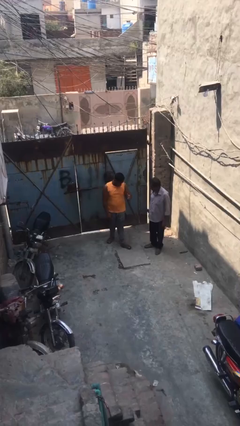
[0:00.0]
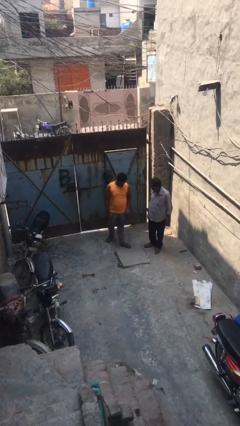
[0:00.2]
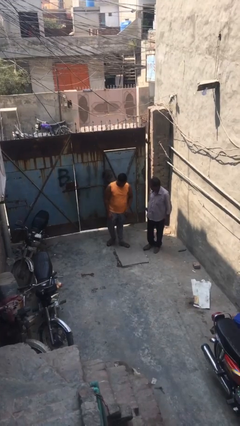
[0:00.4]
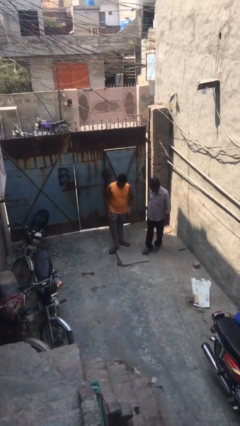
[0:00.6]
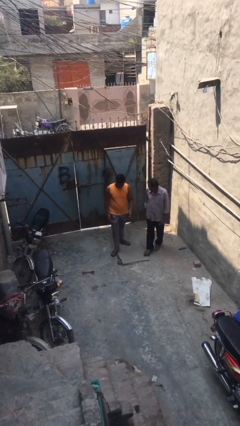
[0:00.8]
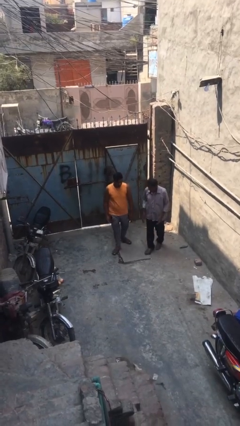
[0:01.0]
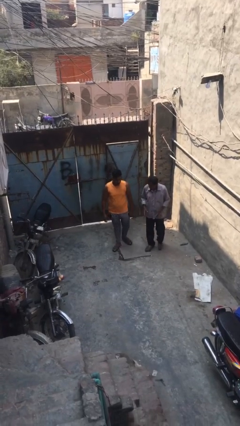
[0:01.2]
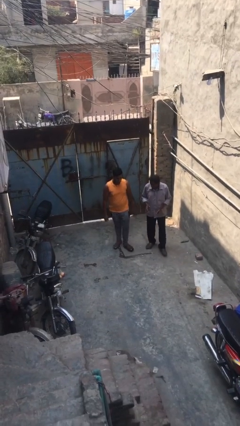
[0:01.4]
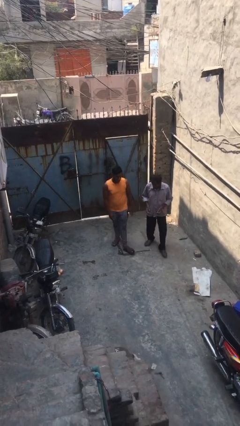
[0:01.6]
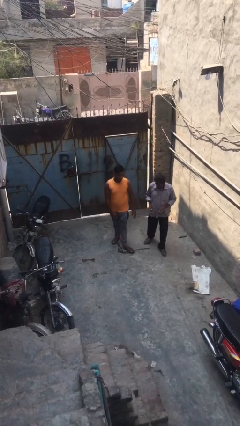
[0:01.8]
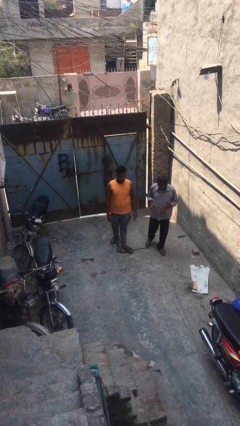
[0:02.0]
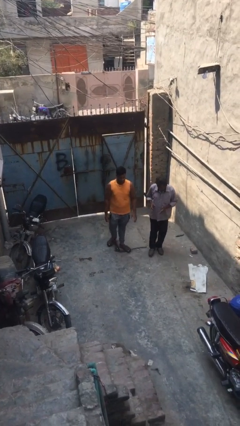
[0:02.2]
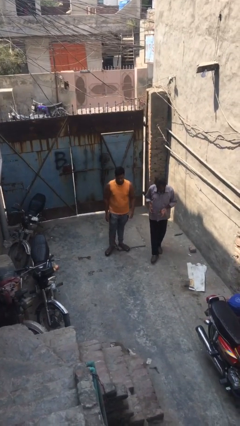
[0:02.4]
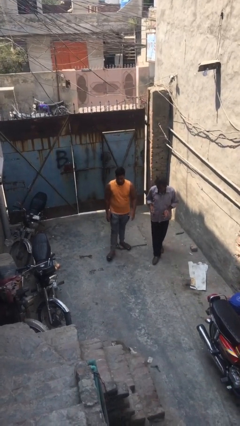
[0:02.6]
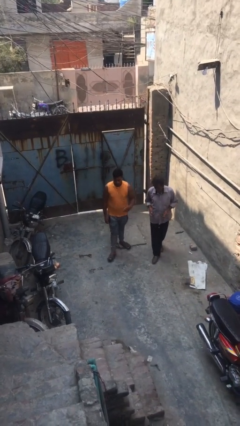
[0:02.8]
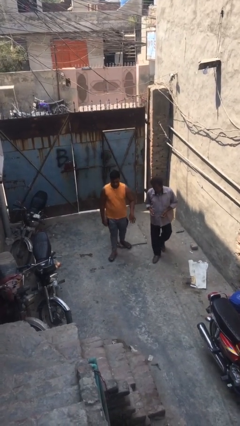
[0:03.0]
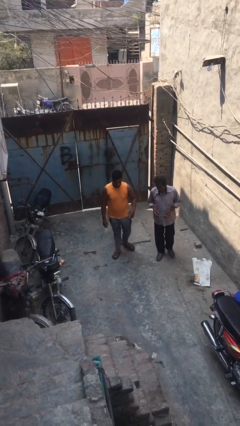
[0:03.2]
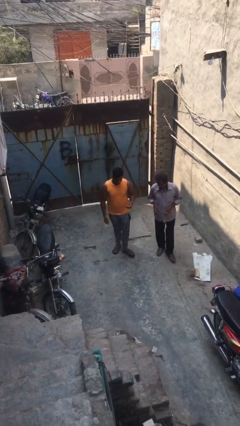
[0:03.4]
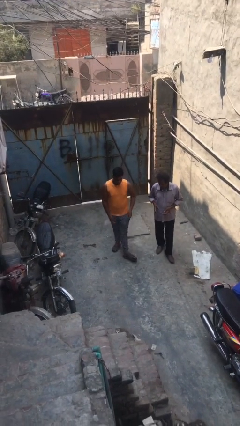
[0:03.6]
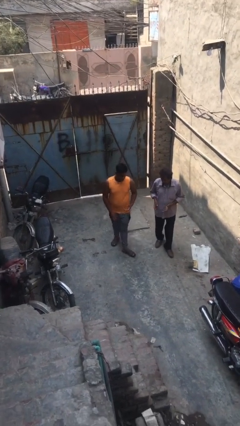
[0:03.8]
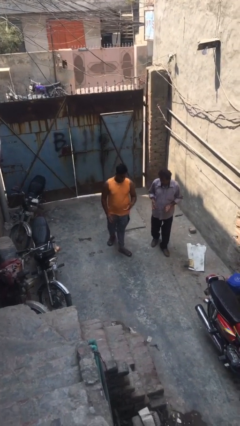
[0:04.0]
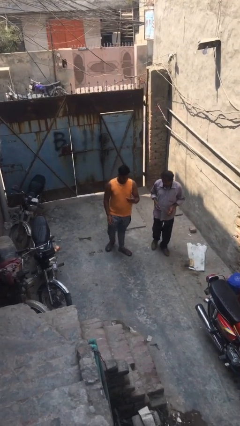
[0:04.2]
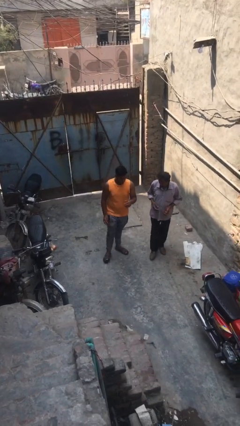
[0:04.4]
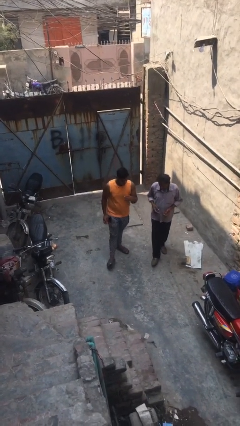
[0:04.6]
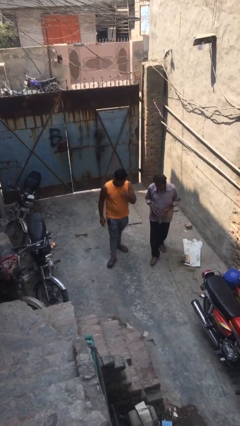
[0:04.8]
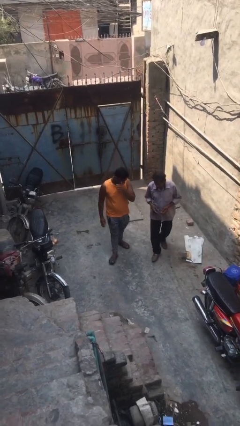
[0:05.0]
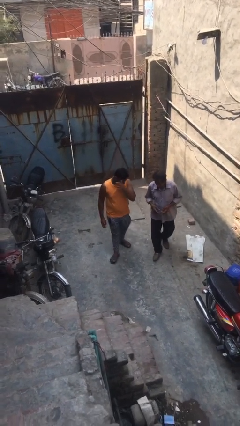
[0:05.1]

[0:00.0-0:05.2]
person talks to person

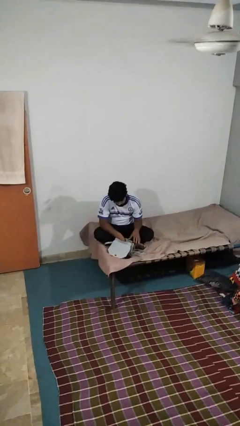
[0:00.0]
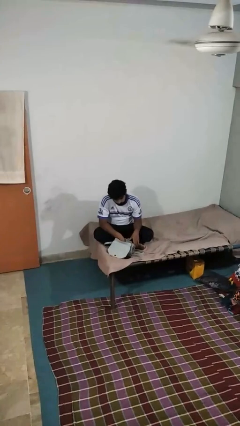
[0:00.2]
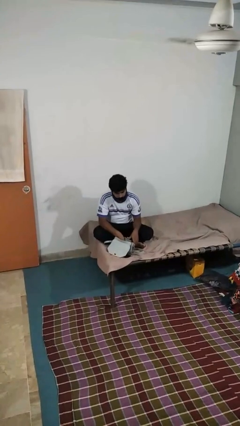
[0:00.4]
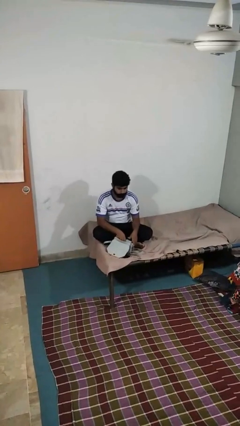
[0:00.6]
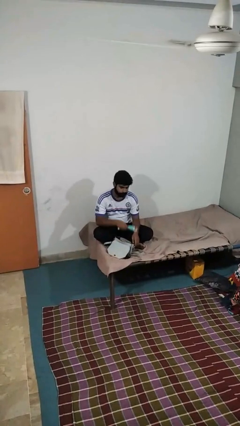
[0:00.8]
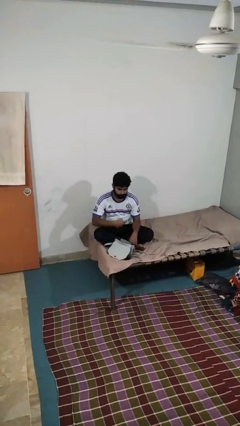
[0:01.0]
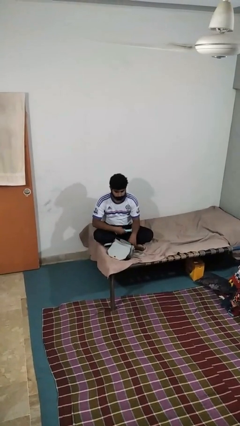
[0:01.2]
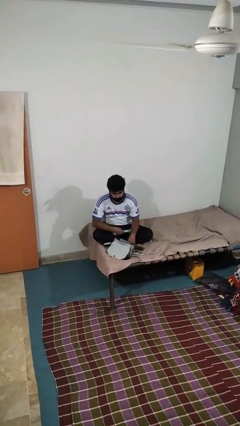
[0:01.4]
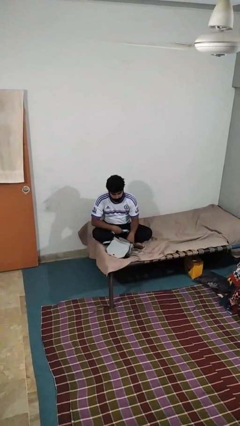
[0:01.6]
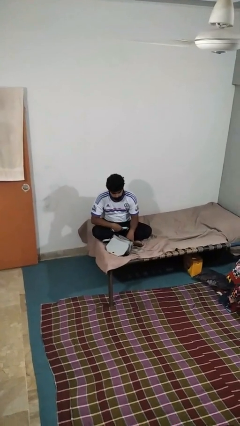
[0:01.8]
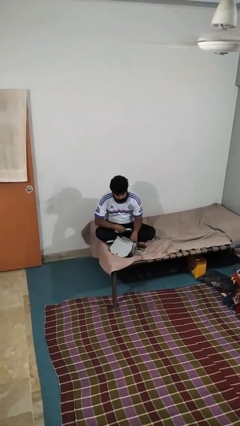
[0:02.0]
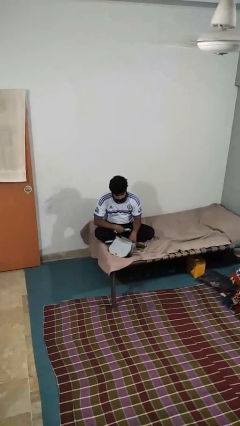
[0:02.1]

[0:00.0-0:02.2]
person takes object from purse

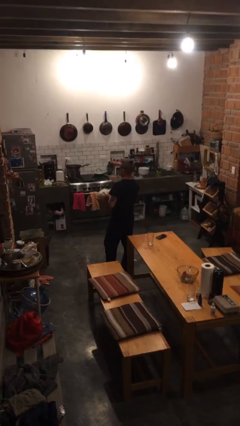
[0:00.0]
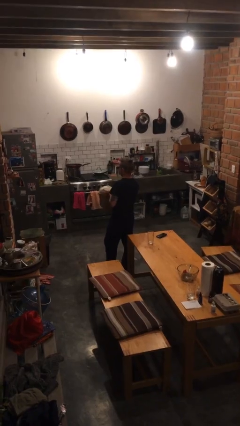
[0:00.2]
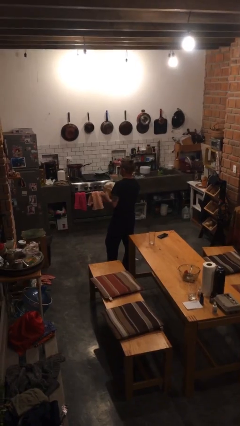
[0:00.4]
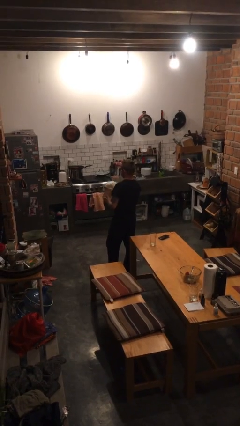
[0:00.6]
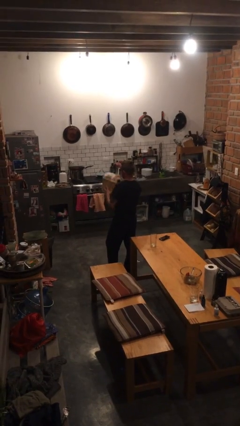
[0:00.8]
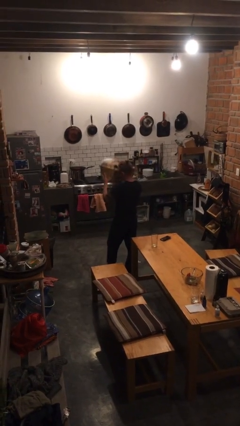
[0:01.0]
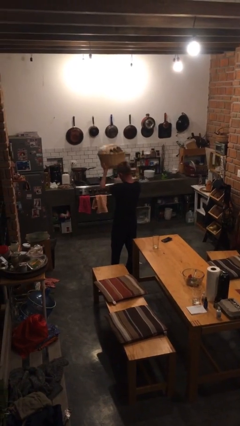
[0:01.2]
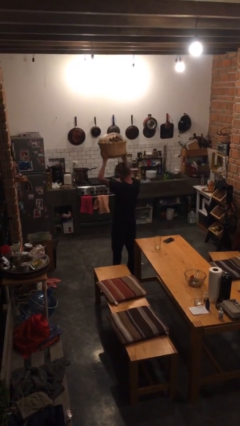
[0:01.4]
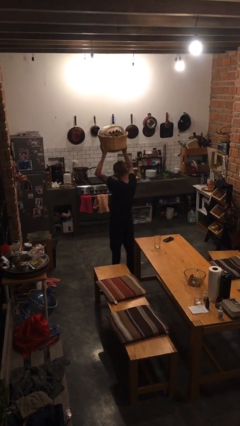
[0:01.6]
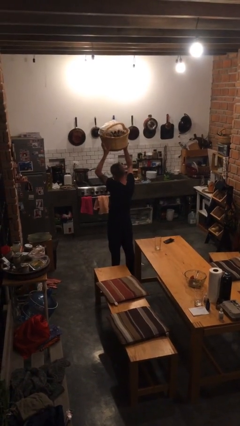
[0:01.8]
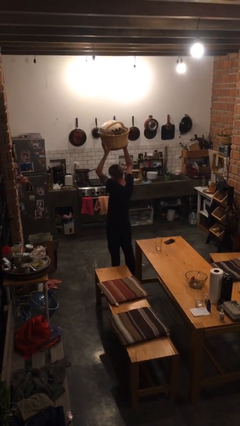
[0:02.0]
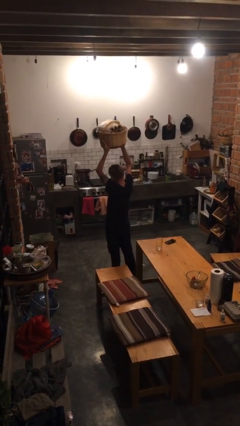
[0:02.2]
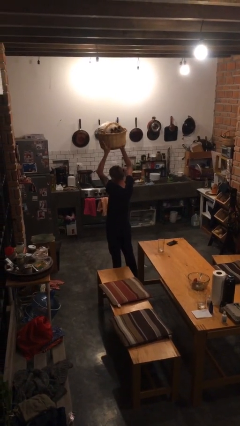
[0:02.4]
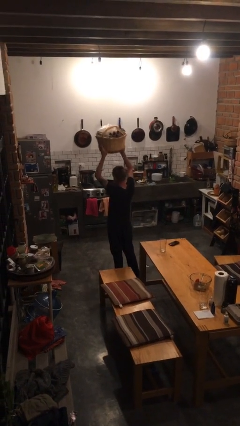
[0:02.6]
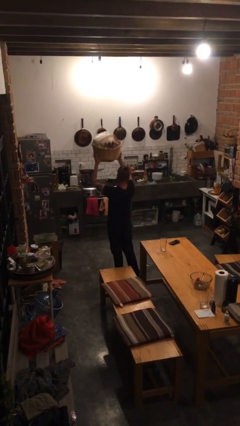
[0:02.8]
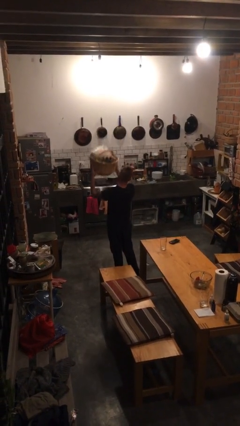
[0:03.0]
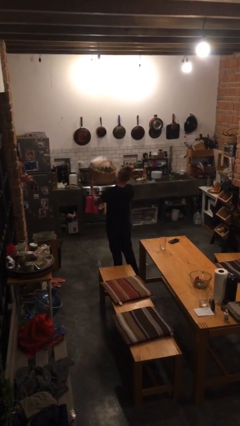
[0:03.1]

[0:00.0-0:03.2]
person holds object above head

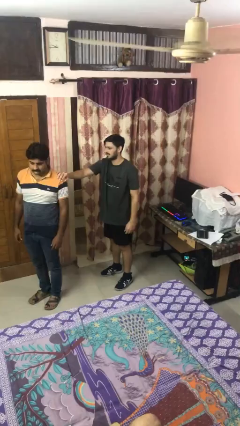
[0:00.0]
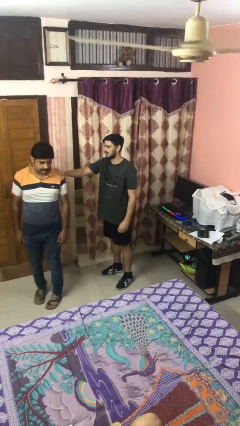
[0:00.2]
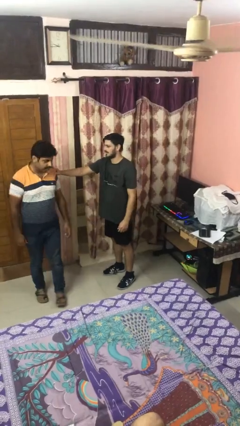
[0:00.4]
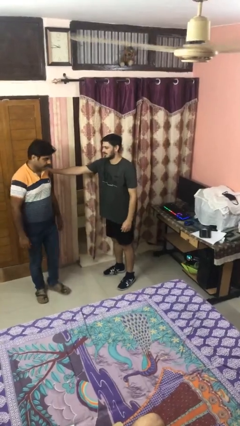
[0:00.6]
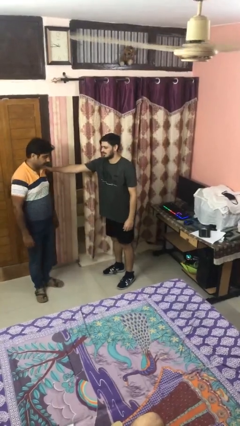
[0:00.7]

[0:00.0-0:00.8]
person spins person around

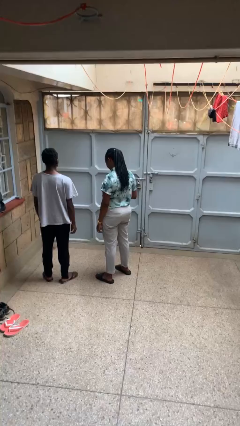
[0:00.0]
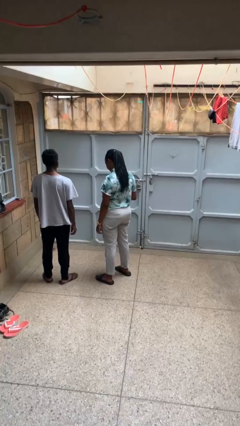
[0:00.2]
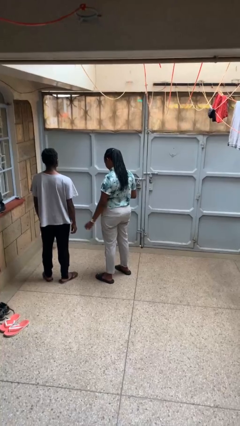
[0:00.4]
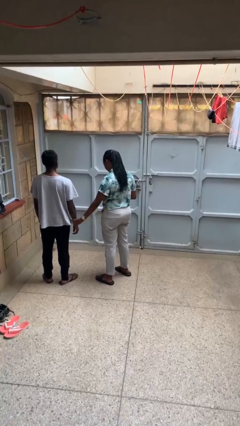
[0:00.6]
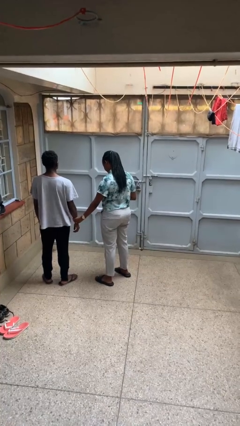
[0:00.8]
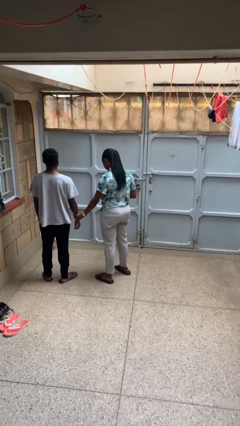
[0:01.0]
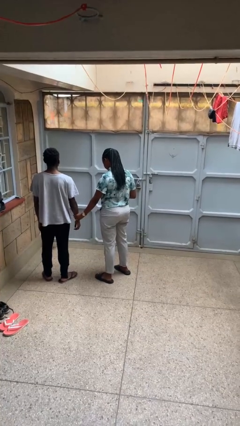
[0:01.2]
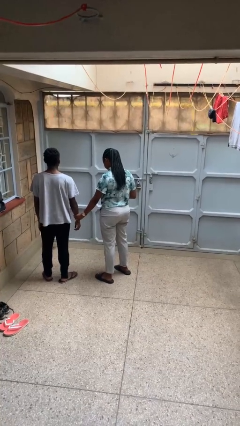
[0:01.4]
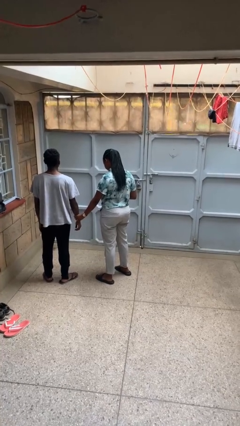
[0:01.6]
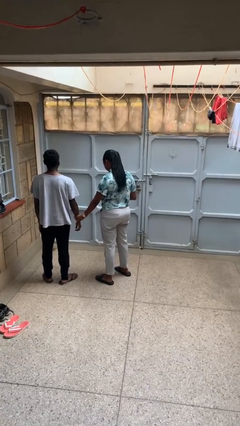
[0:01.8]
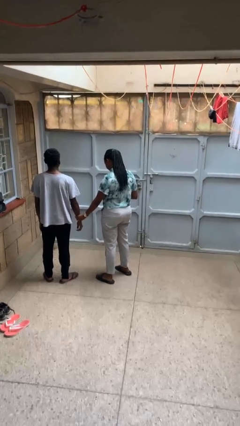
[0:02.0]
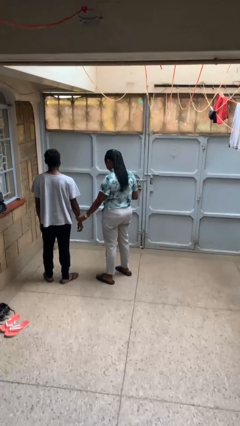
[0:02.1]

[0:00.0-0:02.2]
person grabs person by forearm

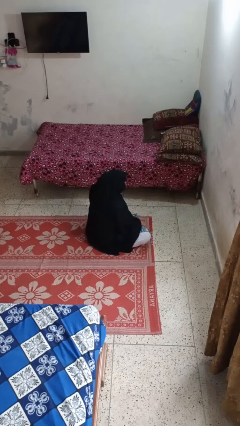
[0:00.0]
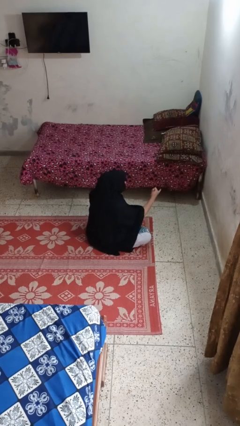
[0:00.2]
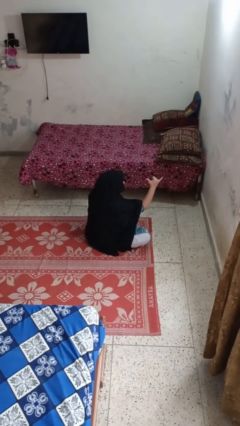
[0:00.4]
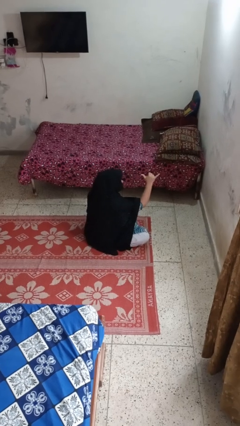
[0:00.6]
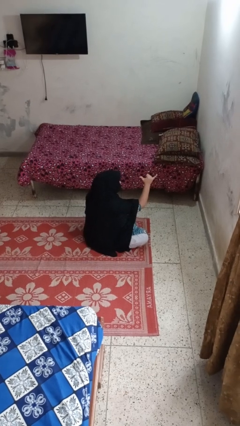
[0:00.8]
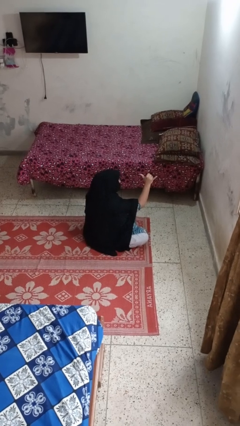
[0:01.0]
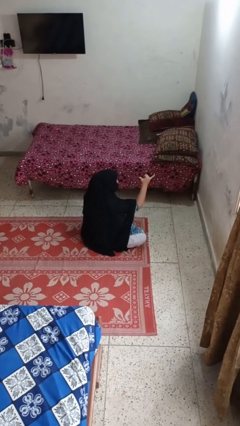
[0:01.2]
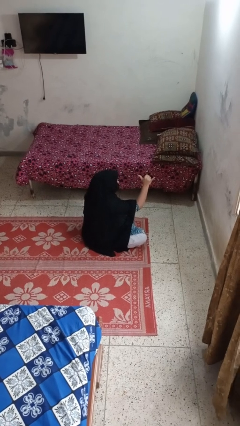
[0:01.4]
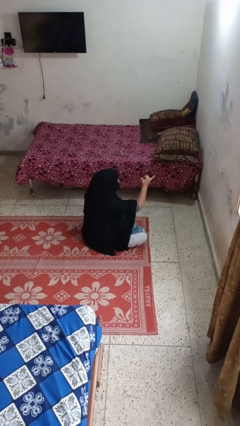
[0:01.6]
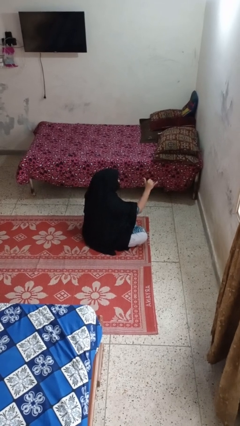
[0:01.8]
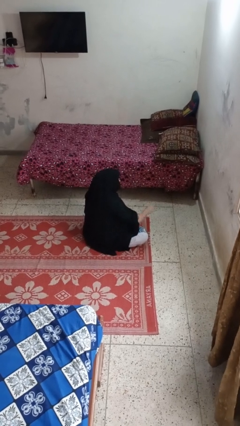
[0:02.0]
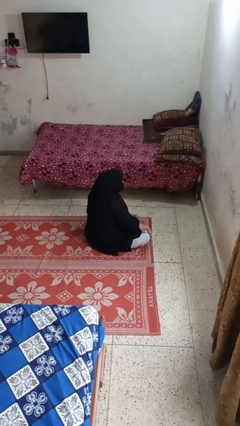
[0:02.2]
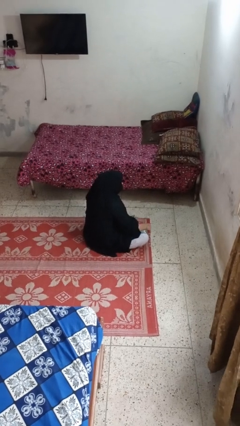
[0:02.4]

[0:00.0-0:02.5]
person gestures hang loose

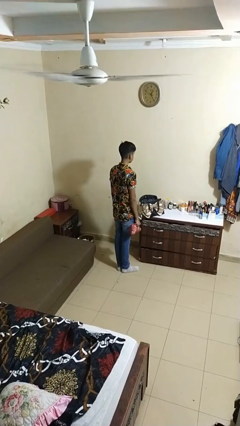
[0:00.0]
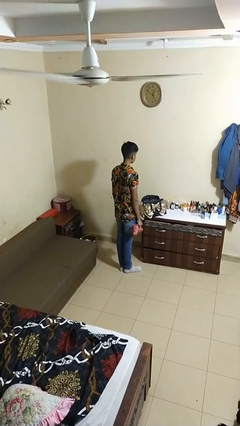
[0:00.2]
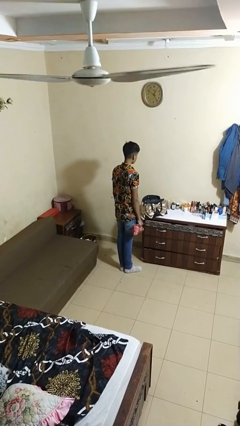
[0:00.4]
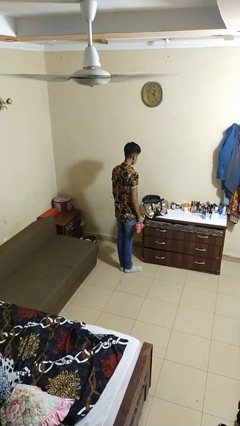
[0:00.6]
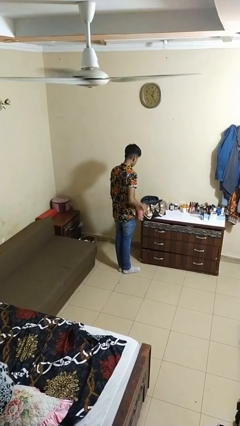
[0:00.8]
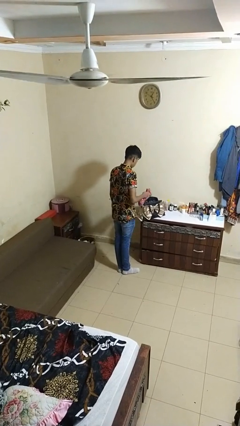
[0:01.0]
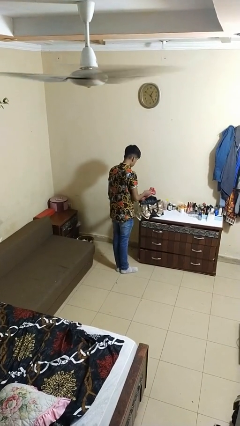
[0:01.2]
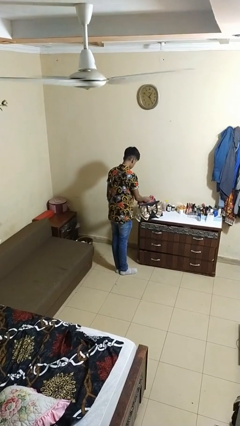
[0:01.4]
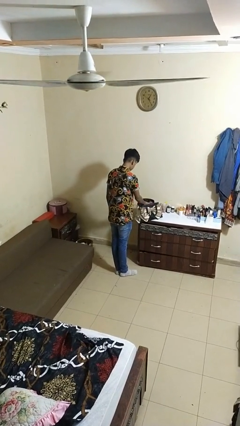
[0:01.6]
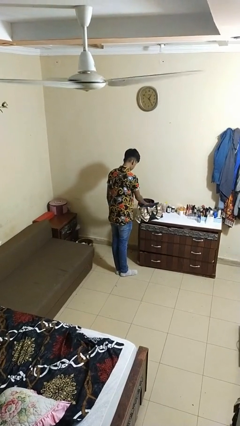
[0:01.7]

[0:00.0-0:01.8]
person puts object into purse
